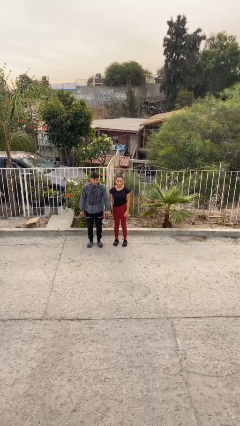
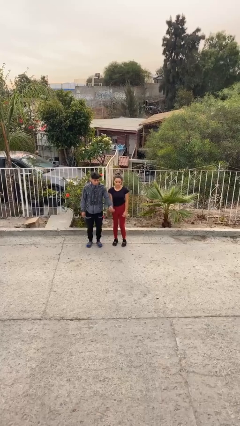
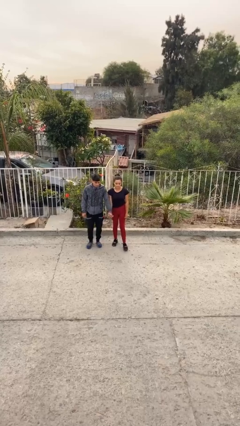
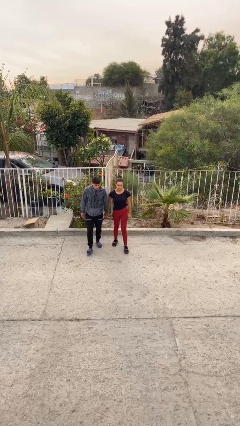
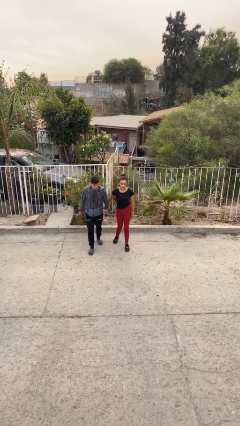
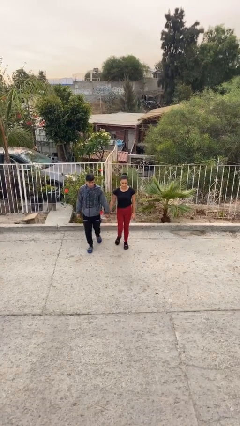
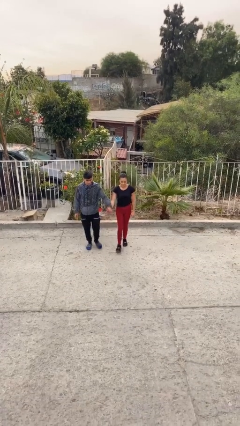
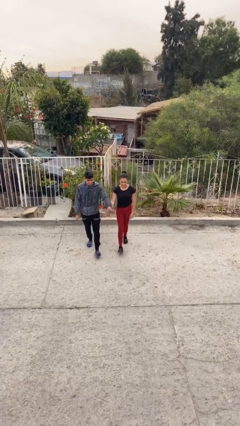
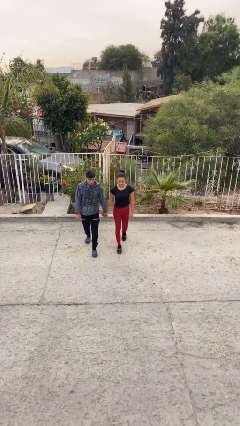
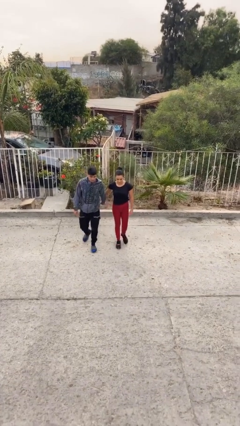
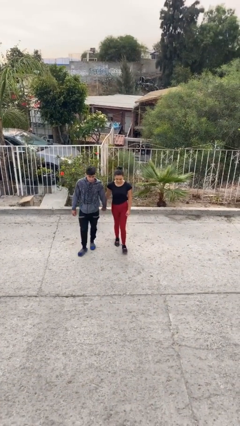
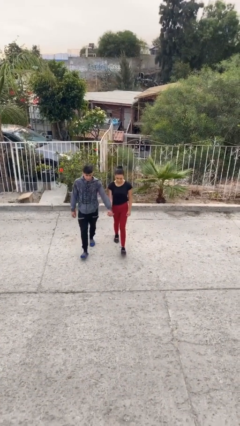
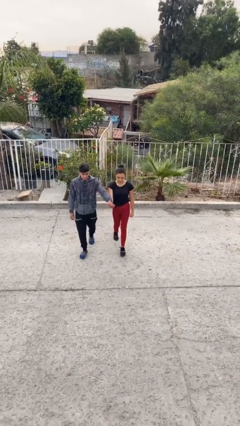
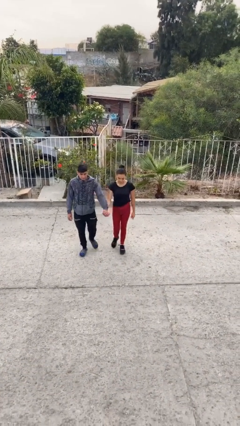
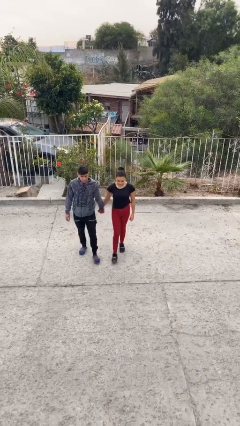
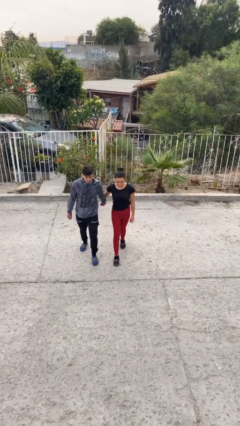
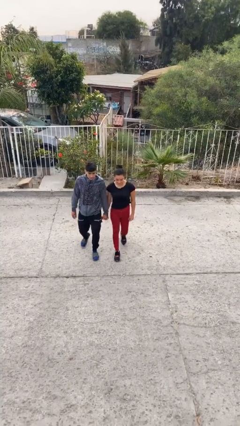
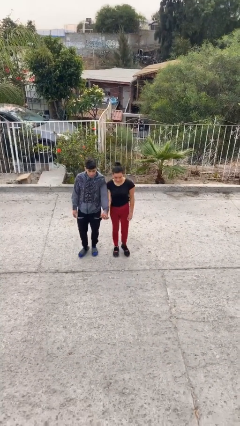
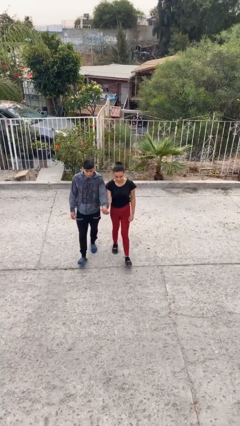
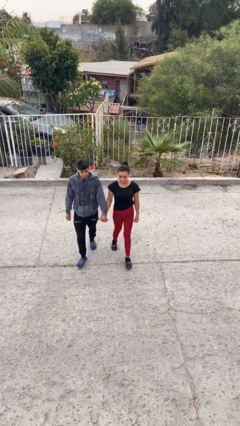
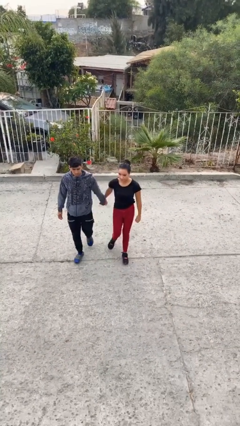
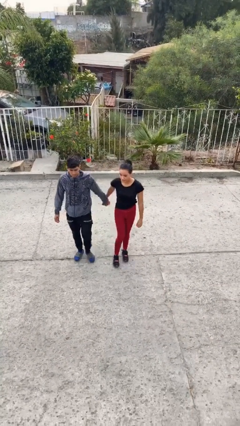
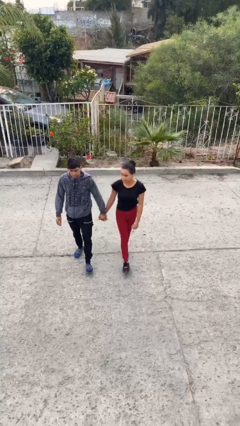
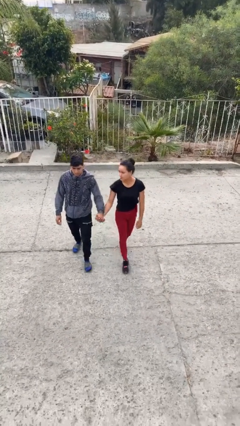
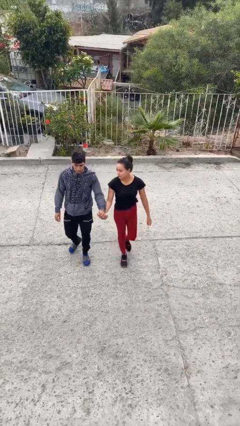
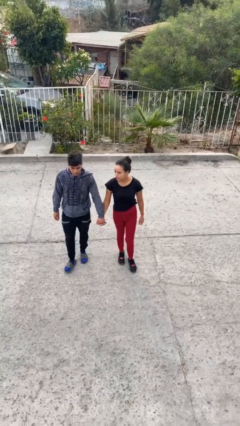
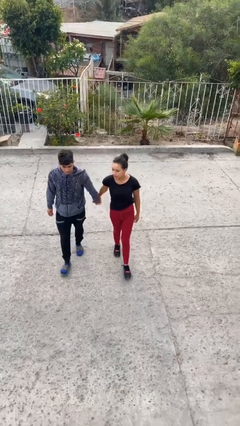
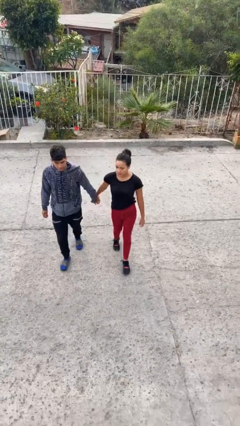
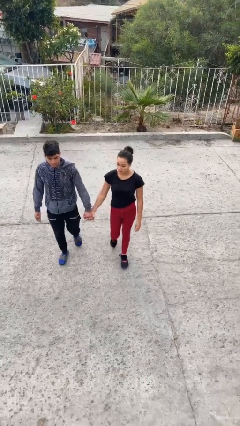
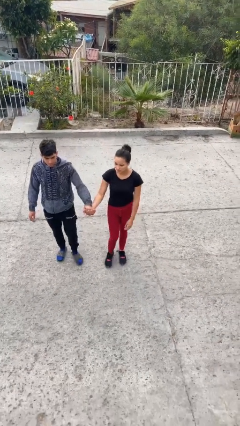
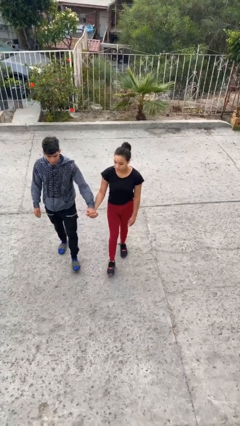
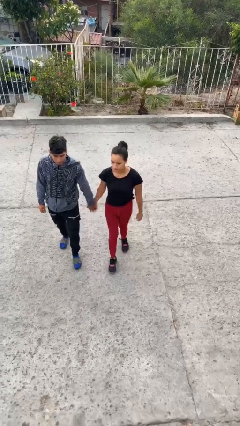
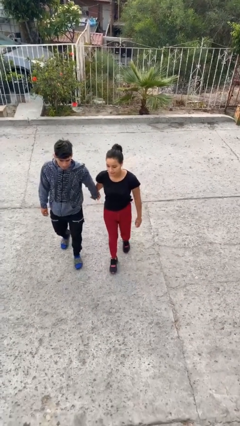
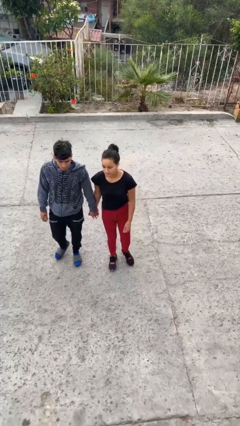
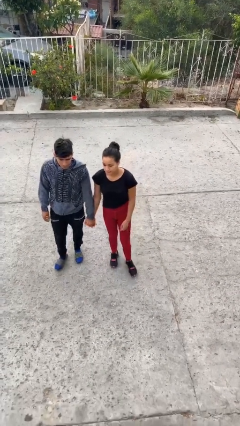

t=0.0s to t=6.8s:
person holds hand

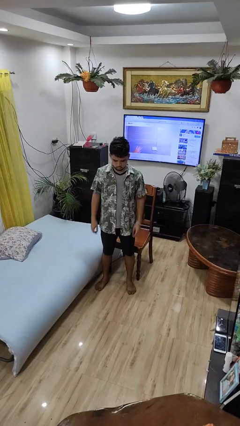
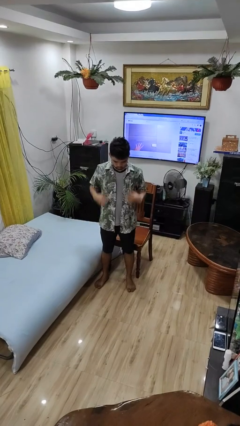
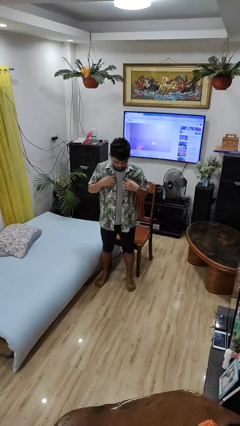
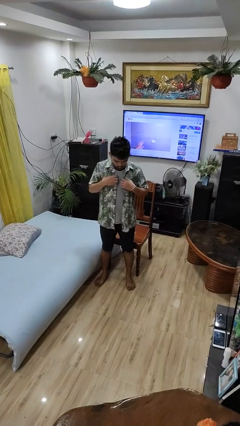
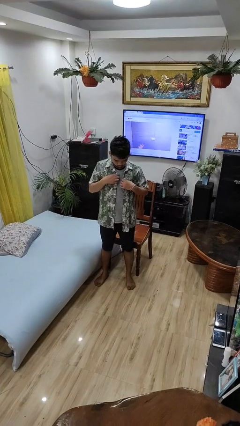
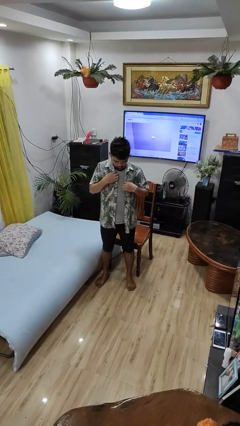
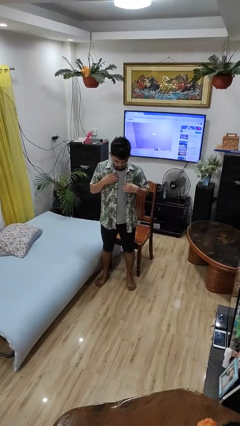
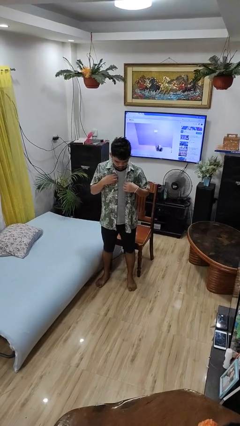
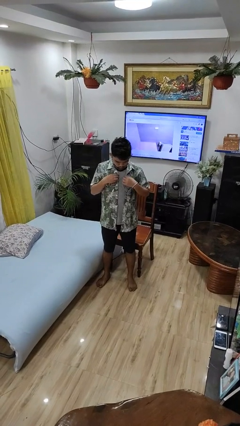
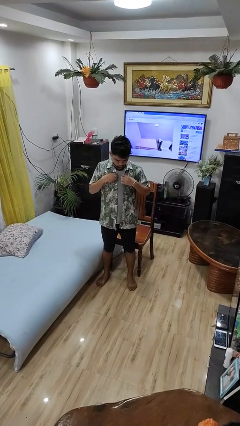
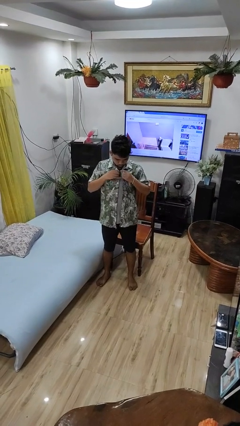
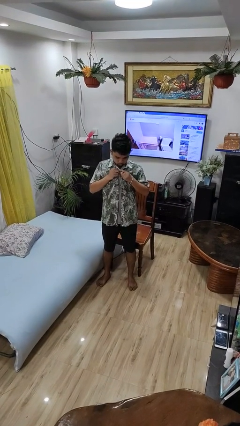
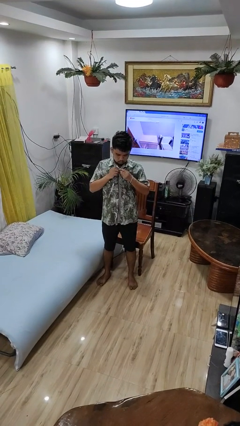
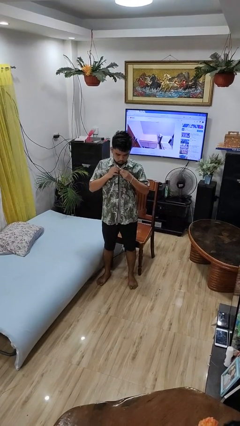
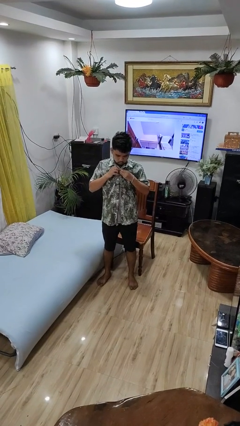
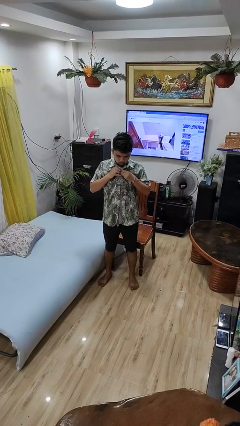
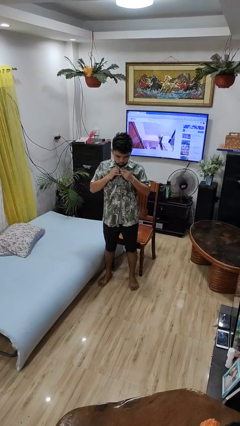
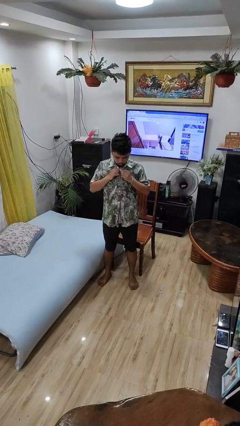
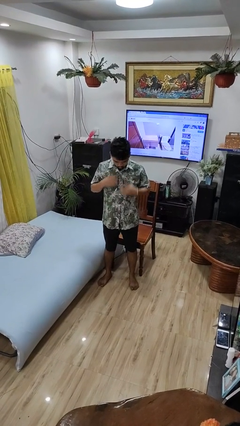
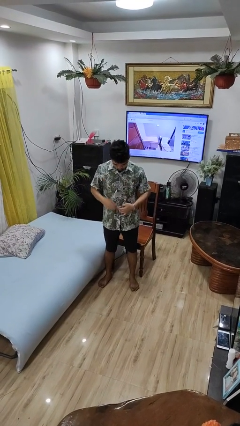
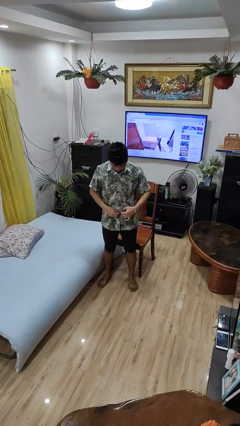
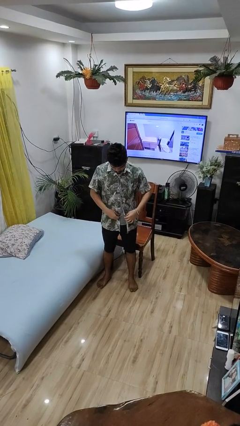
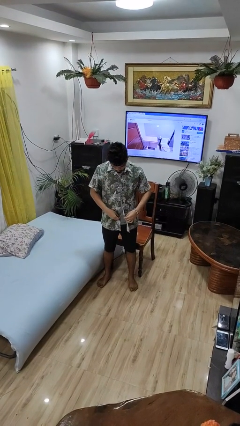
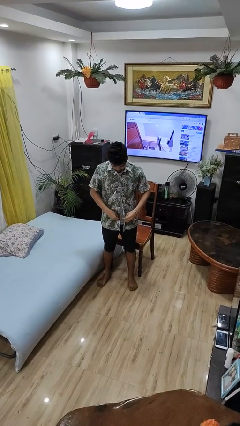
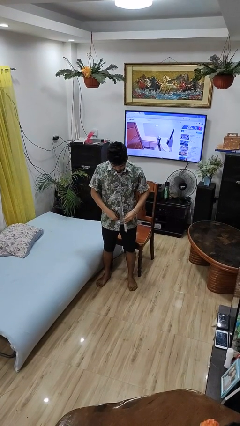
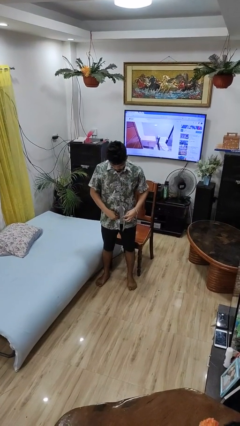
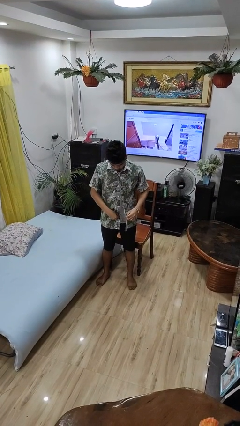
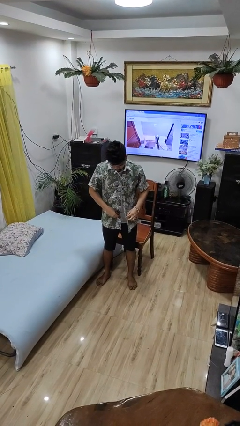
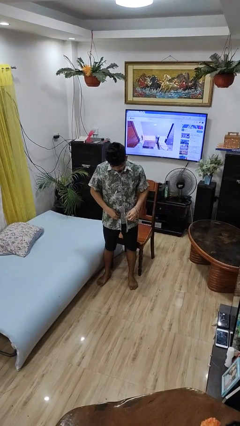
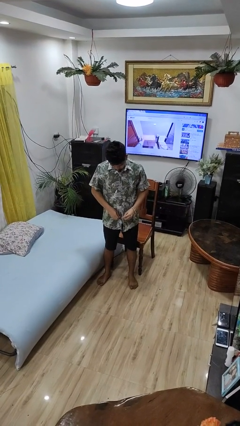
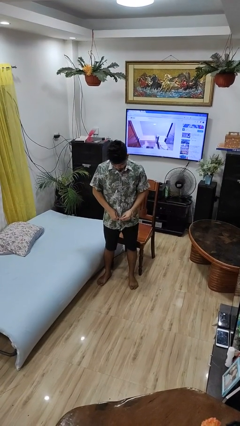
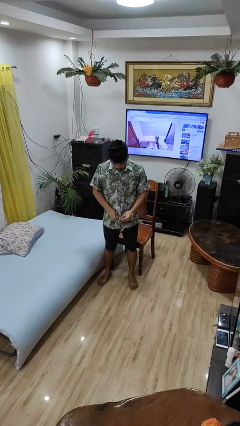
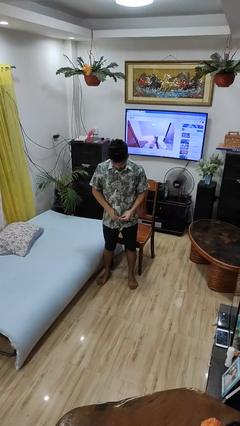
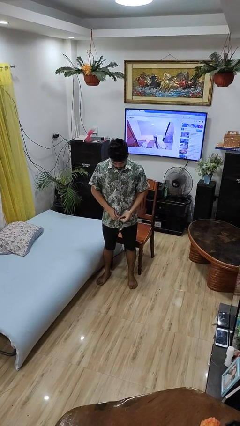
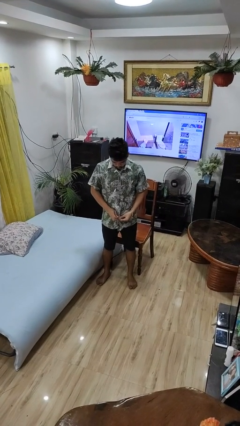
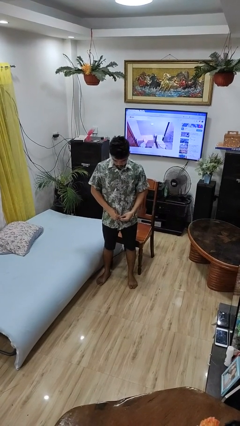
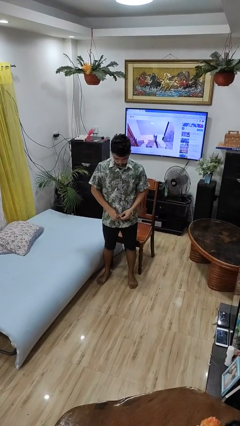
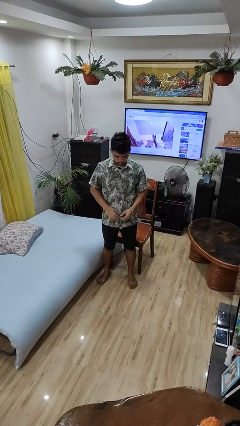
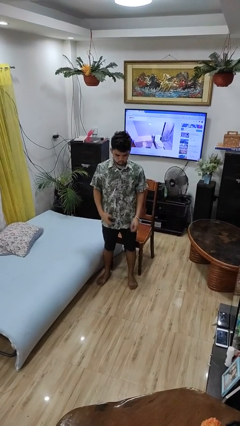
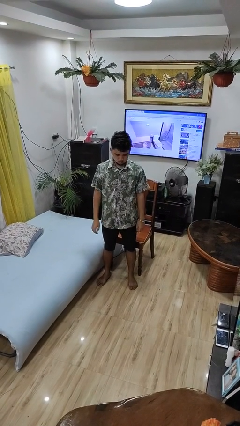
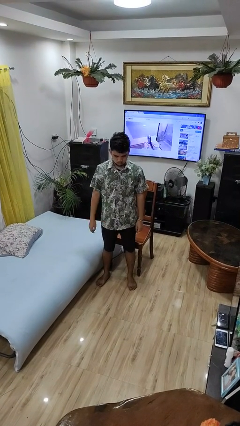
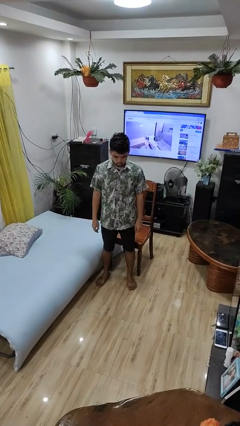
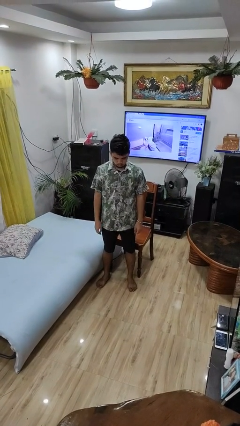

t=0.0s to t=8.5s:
person buttons shirt

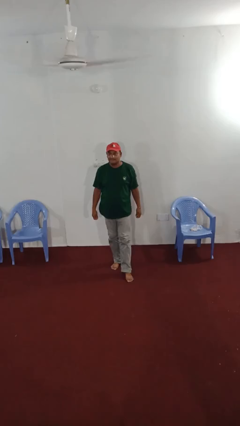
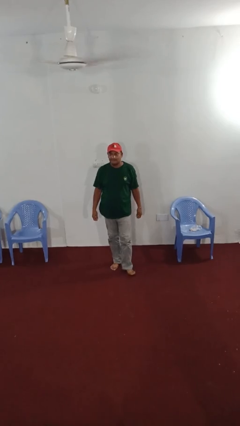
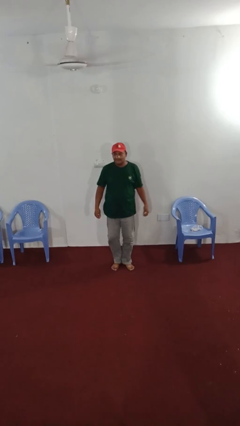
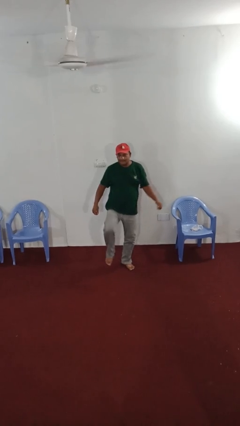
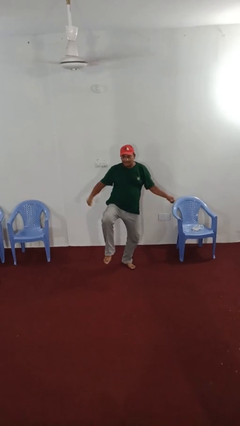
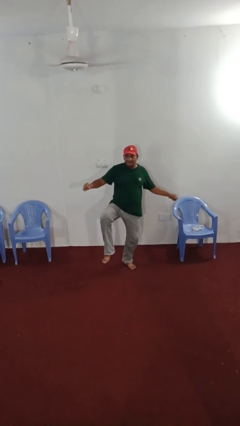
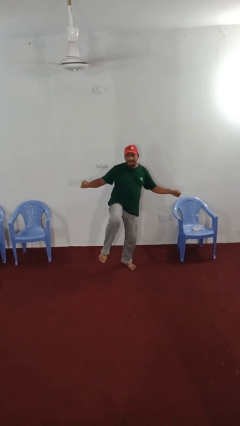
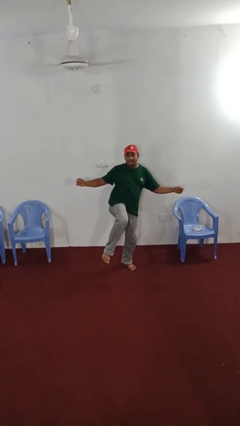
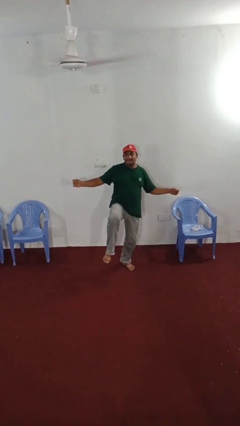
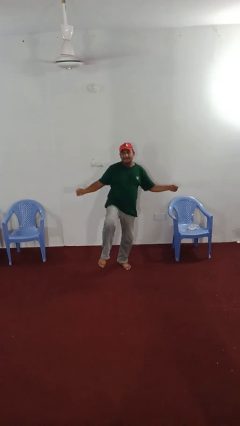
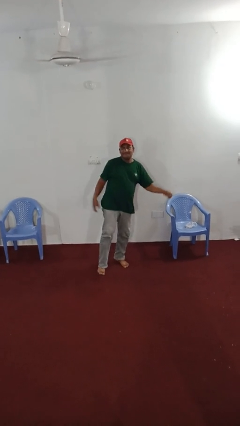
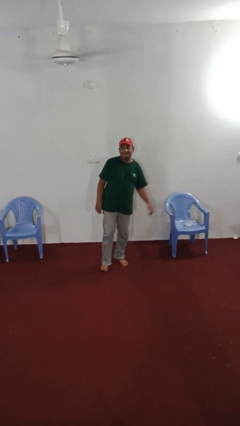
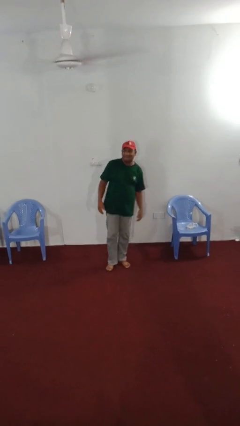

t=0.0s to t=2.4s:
person dances in place
